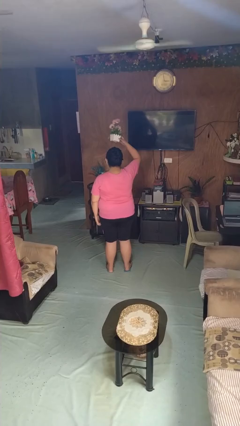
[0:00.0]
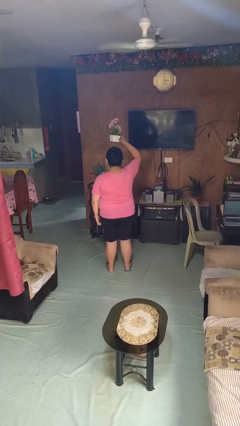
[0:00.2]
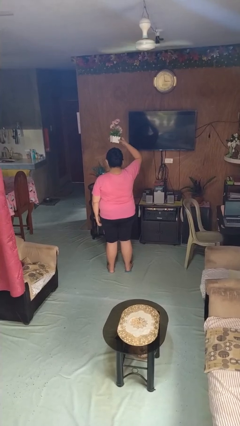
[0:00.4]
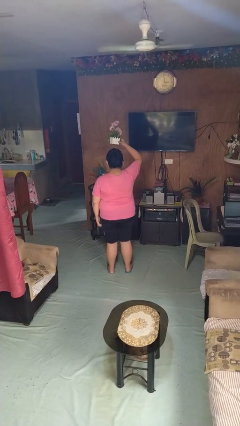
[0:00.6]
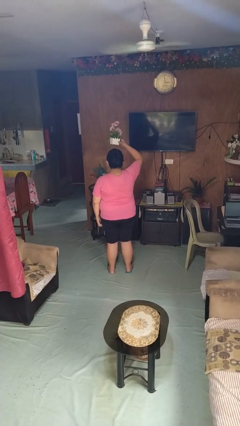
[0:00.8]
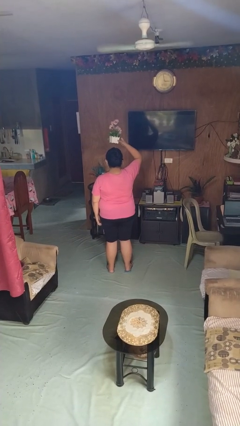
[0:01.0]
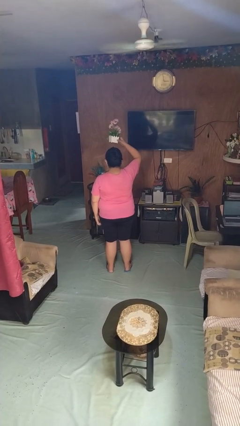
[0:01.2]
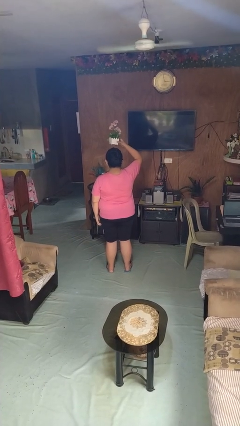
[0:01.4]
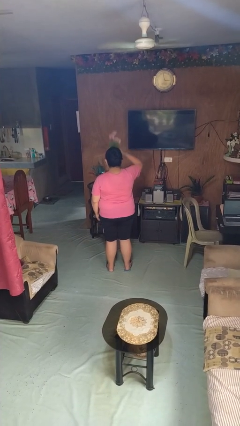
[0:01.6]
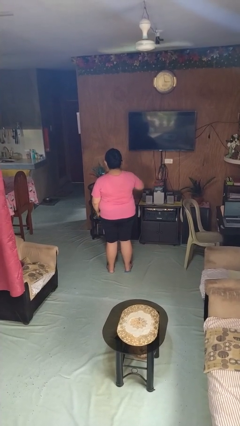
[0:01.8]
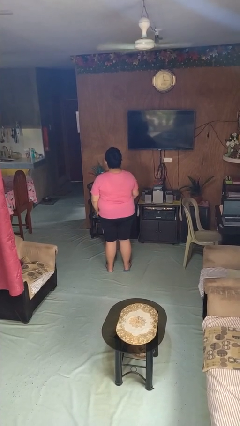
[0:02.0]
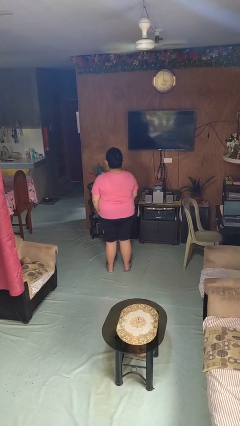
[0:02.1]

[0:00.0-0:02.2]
person holds object above head

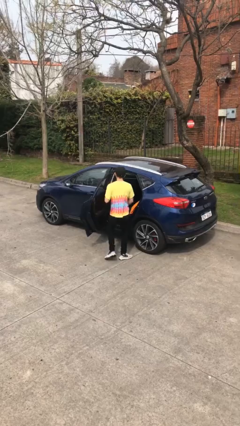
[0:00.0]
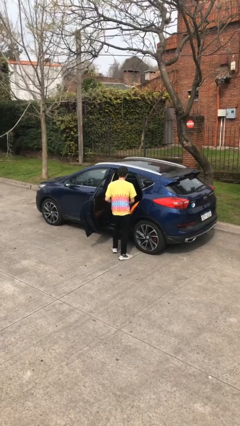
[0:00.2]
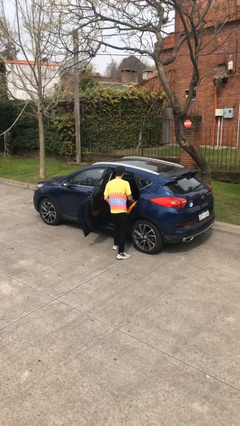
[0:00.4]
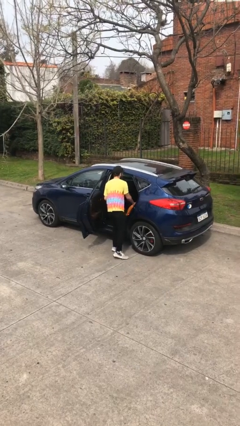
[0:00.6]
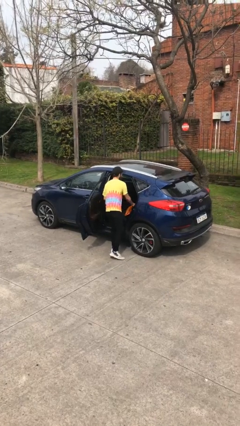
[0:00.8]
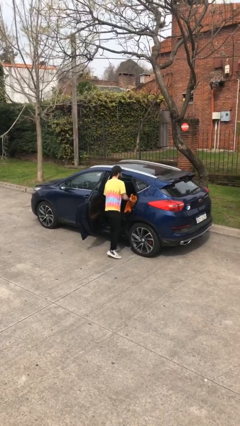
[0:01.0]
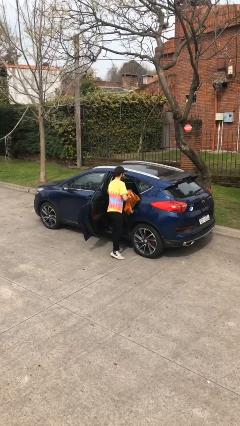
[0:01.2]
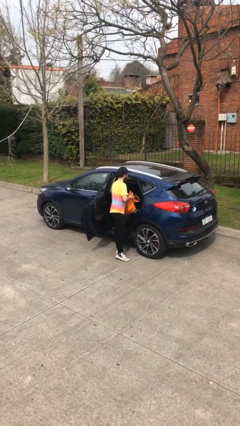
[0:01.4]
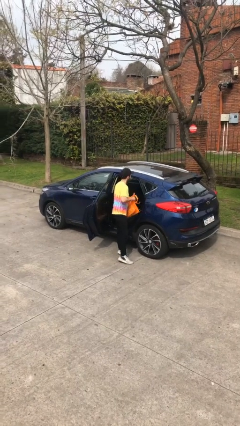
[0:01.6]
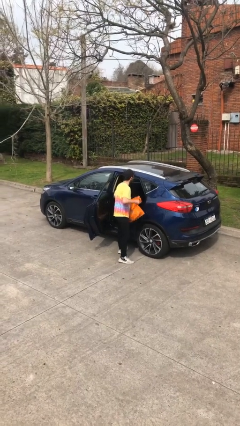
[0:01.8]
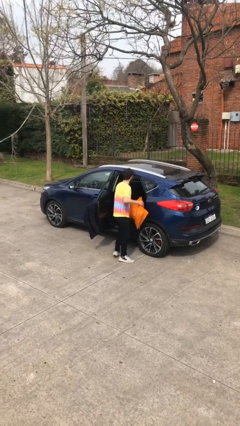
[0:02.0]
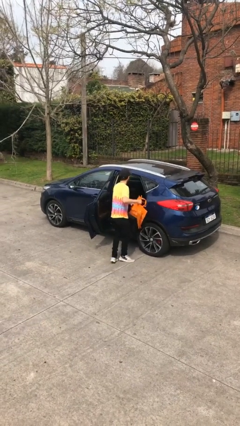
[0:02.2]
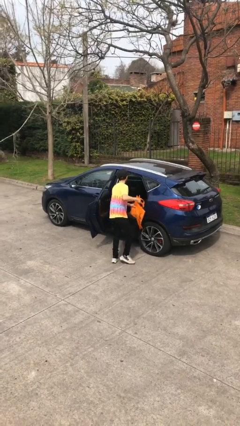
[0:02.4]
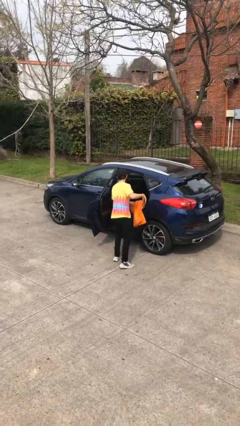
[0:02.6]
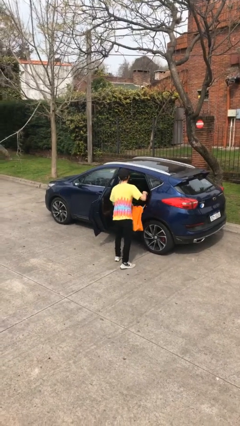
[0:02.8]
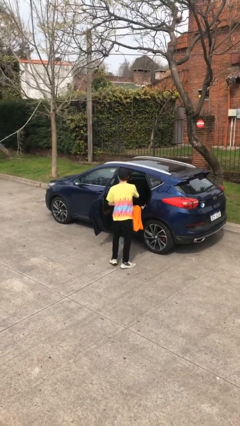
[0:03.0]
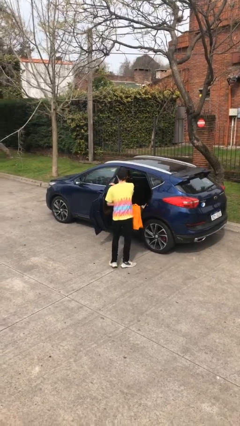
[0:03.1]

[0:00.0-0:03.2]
person unloads car

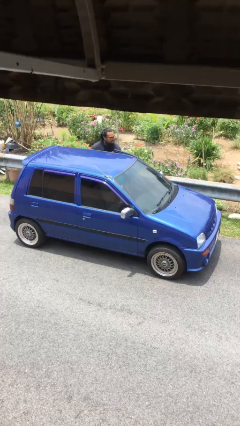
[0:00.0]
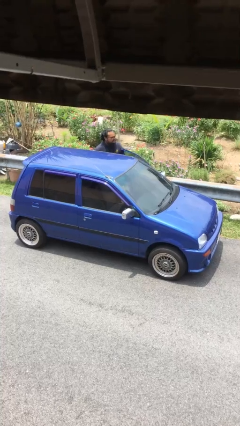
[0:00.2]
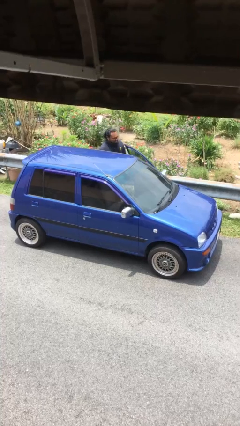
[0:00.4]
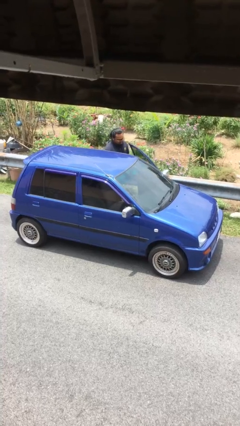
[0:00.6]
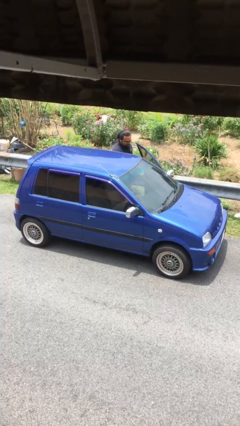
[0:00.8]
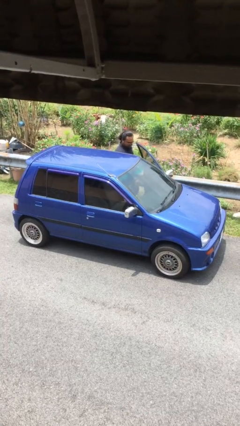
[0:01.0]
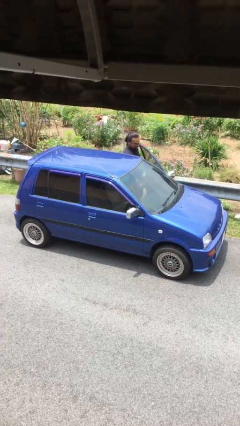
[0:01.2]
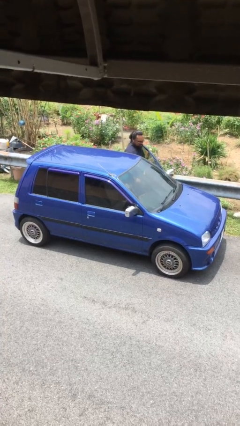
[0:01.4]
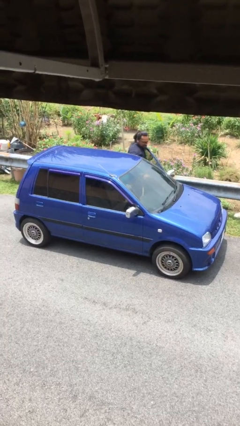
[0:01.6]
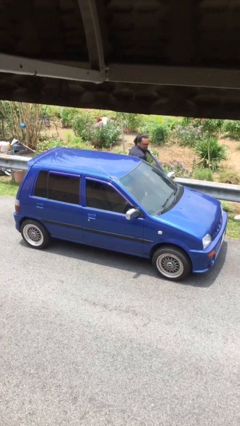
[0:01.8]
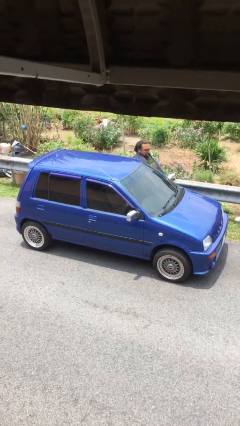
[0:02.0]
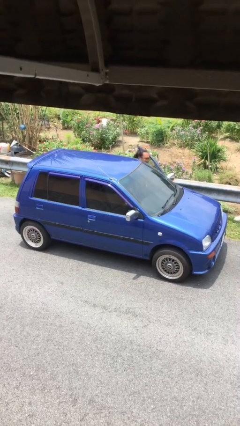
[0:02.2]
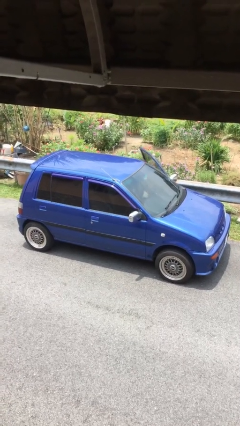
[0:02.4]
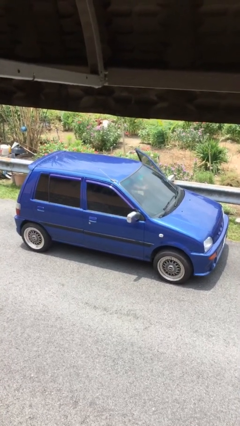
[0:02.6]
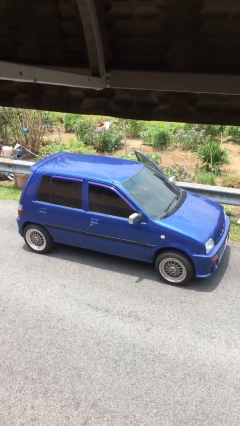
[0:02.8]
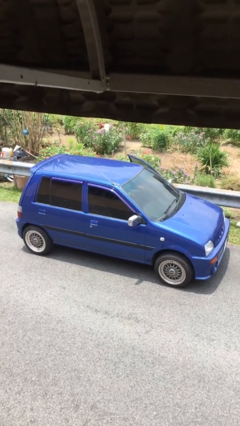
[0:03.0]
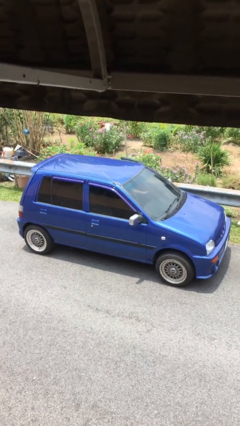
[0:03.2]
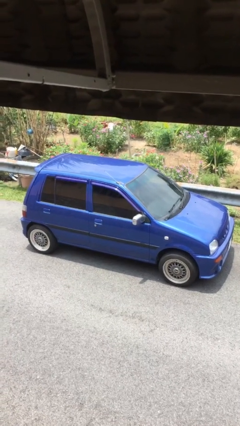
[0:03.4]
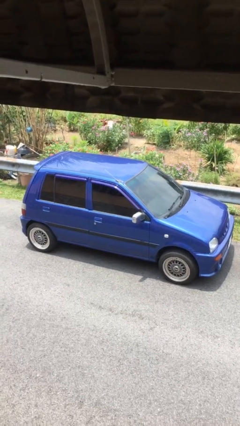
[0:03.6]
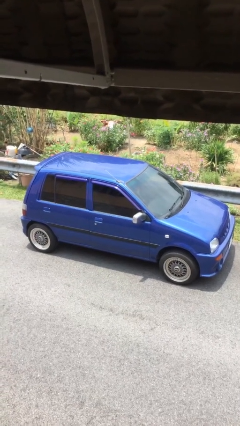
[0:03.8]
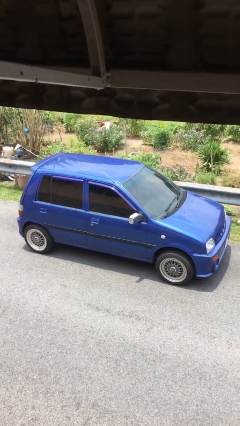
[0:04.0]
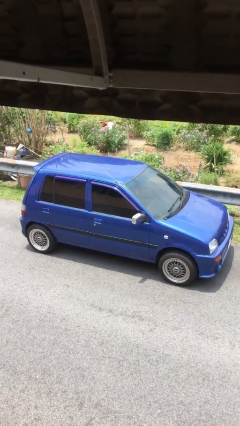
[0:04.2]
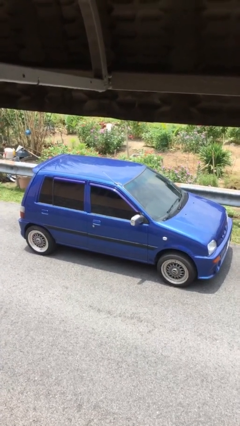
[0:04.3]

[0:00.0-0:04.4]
car picks up person

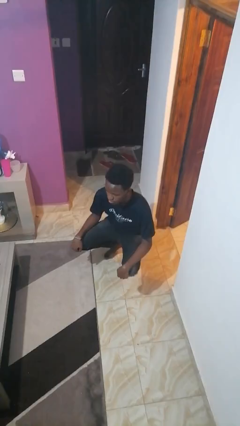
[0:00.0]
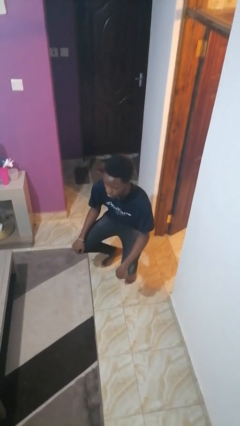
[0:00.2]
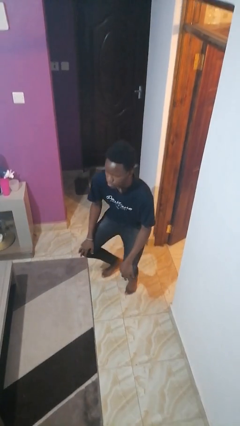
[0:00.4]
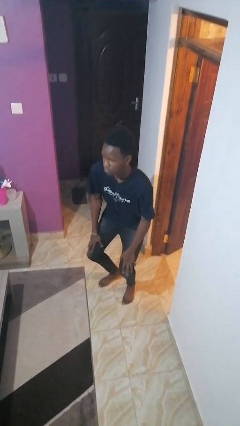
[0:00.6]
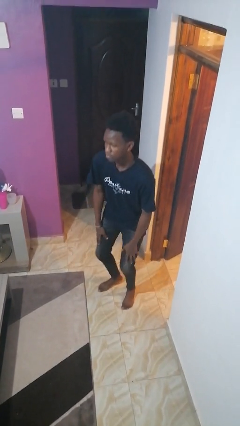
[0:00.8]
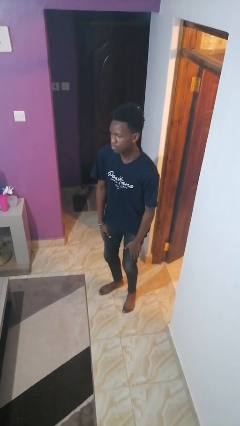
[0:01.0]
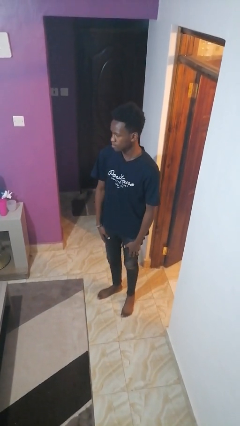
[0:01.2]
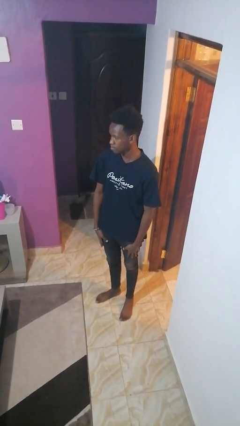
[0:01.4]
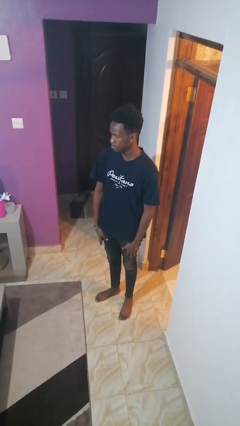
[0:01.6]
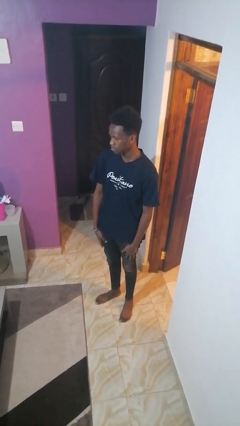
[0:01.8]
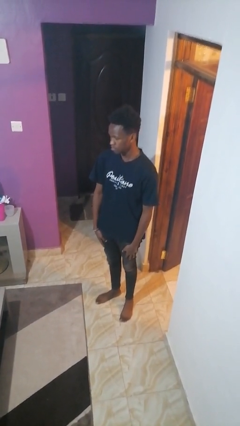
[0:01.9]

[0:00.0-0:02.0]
person stands up

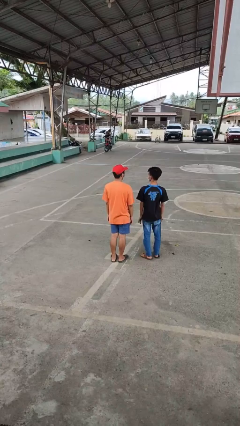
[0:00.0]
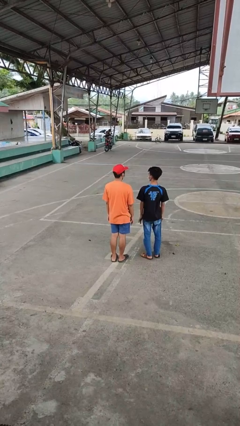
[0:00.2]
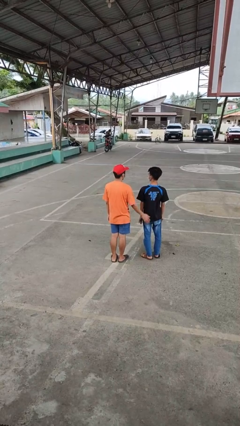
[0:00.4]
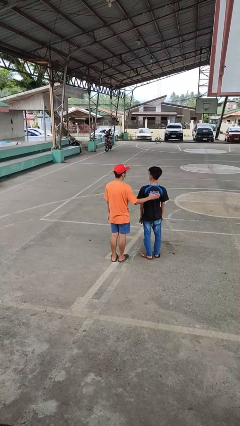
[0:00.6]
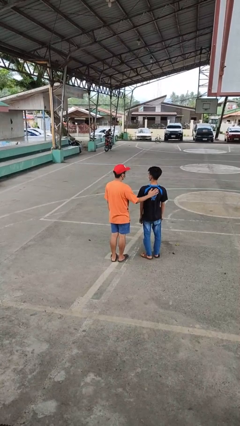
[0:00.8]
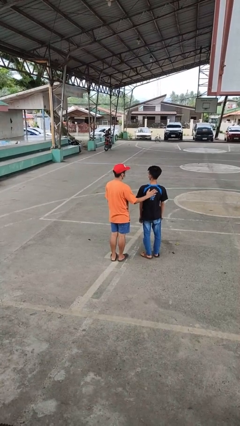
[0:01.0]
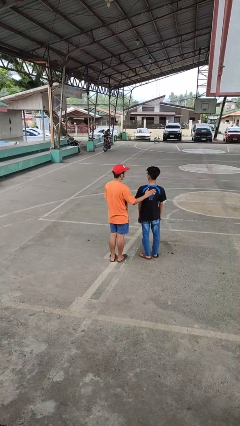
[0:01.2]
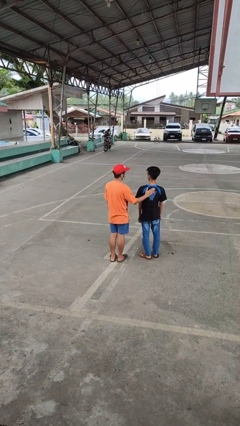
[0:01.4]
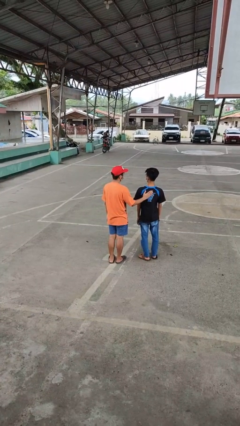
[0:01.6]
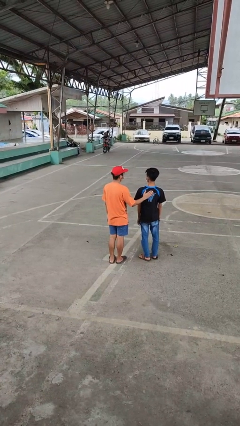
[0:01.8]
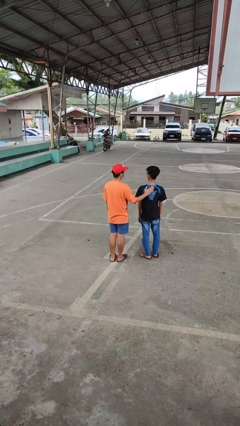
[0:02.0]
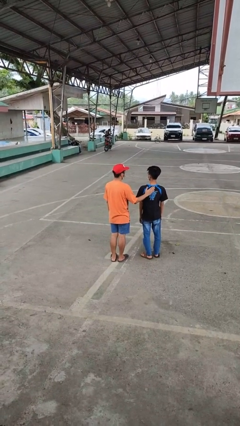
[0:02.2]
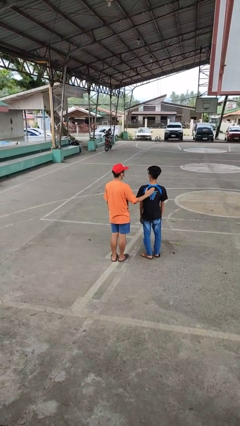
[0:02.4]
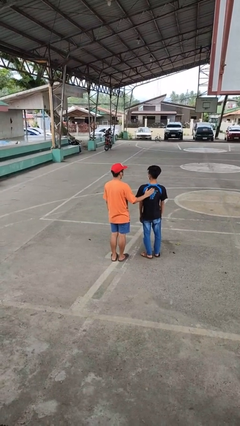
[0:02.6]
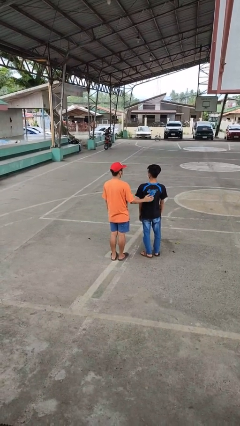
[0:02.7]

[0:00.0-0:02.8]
person touches back of person

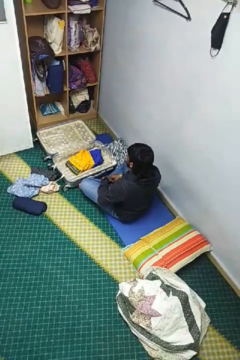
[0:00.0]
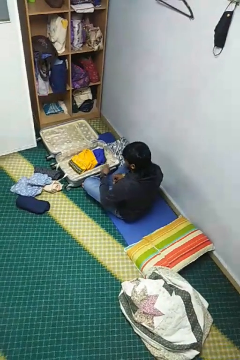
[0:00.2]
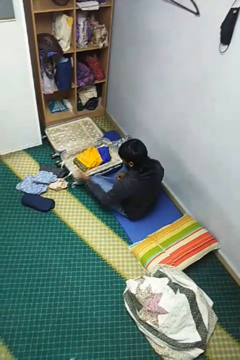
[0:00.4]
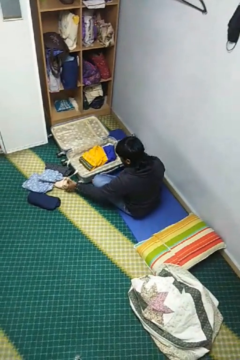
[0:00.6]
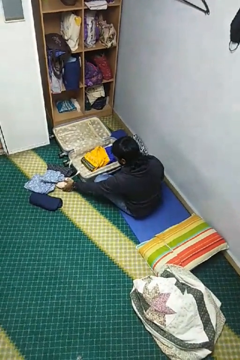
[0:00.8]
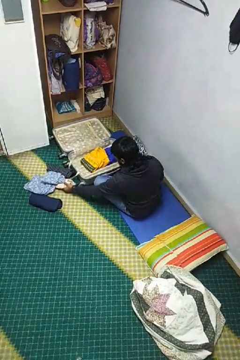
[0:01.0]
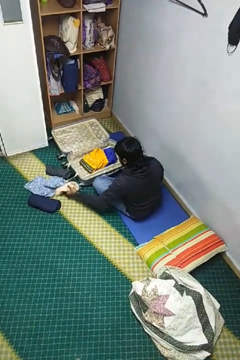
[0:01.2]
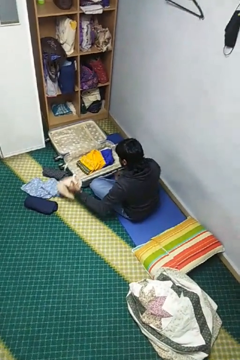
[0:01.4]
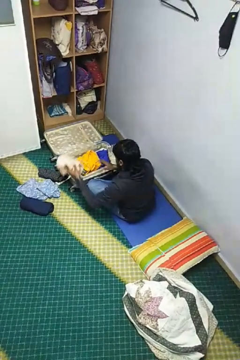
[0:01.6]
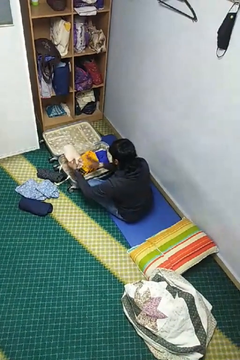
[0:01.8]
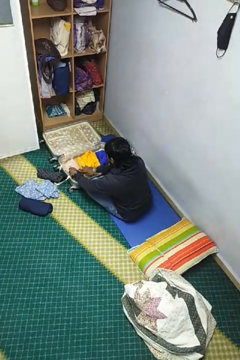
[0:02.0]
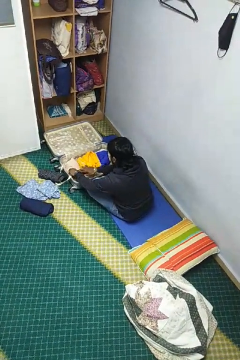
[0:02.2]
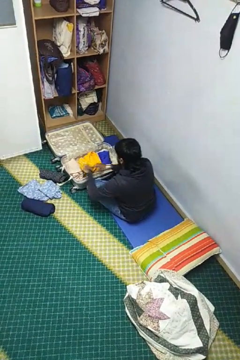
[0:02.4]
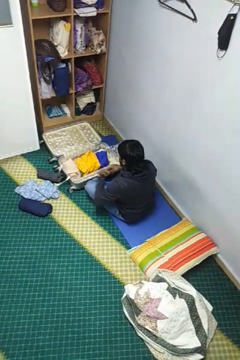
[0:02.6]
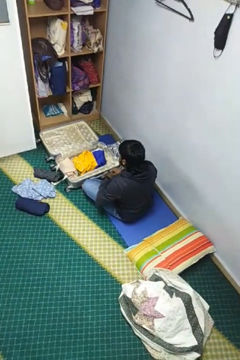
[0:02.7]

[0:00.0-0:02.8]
person loads clothes into suitcase

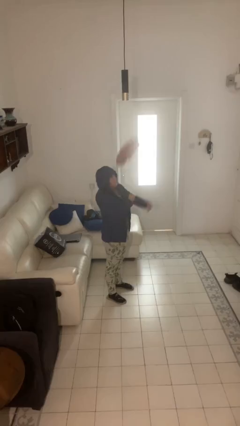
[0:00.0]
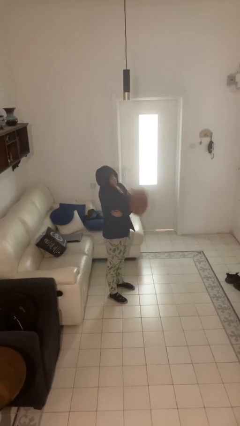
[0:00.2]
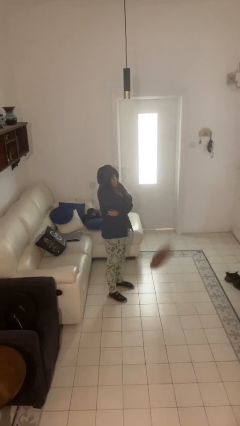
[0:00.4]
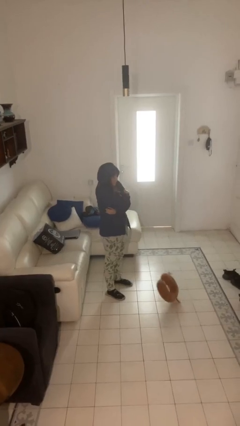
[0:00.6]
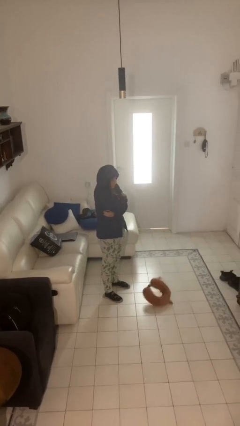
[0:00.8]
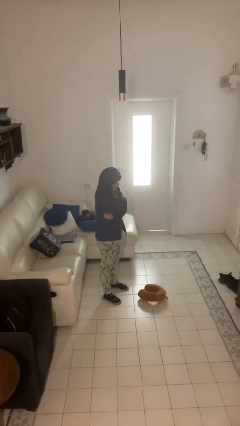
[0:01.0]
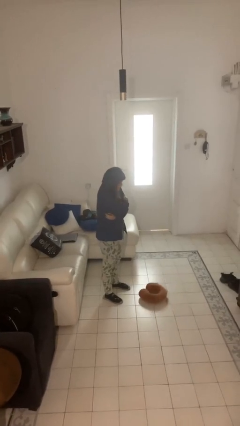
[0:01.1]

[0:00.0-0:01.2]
person catches dropped object
